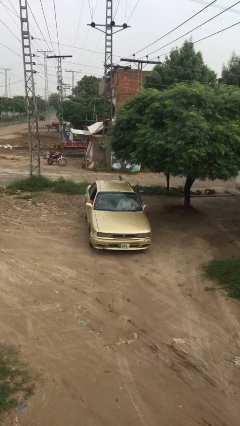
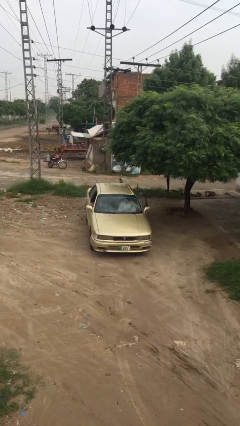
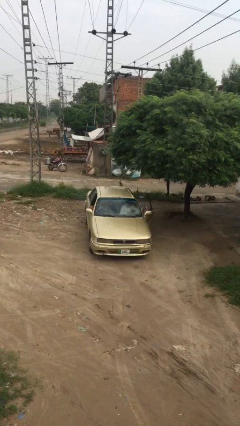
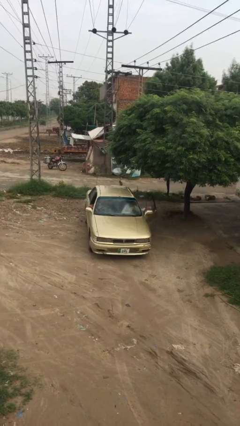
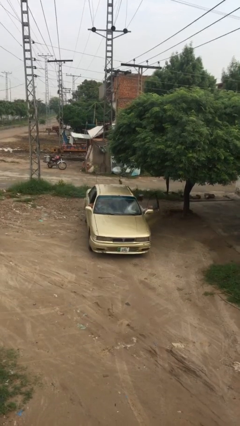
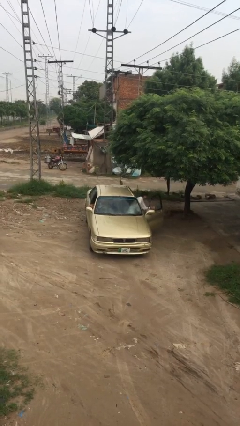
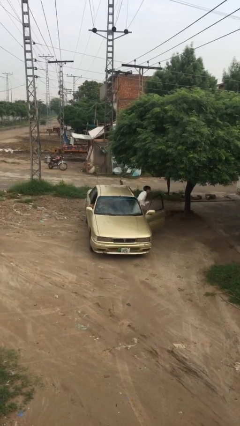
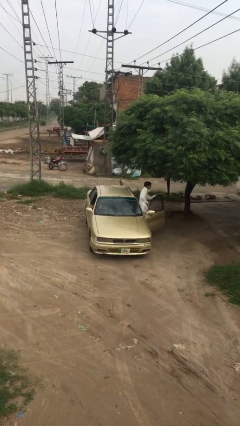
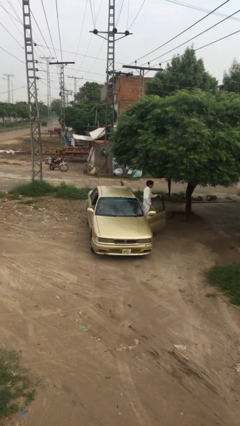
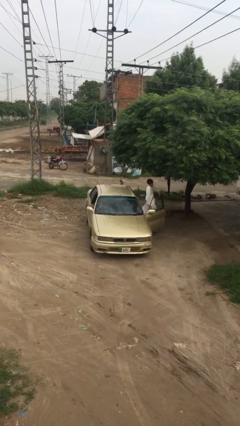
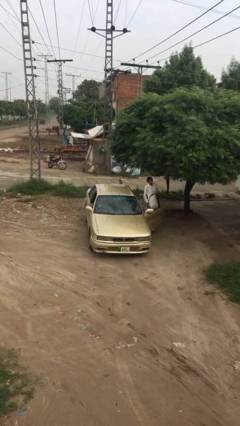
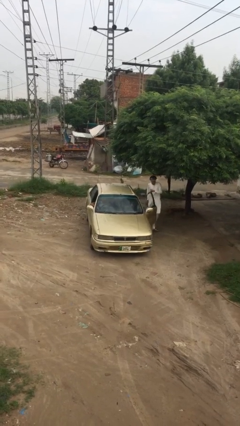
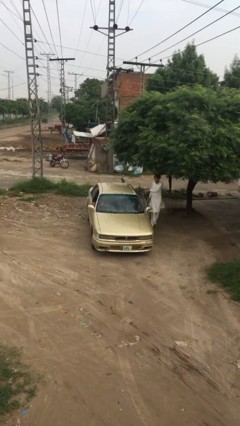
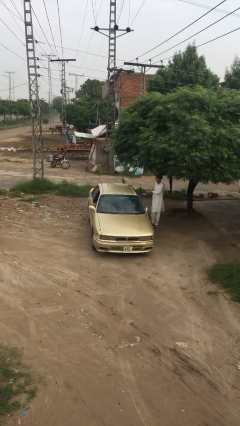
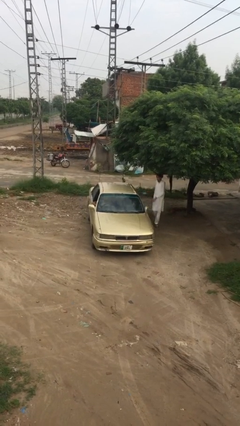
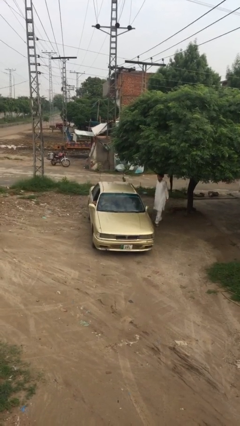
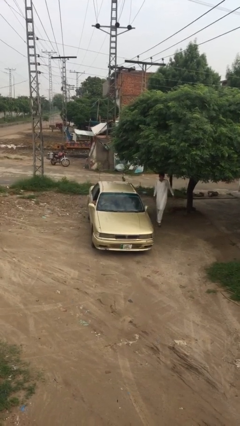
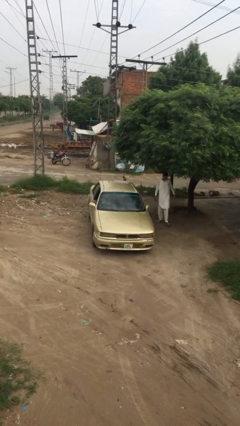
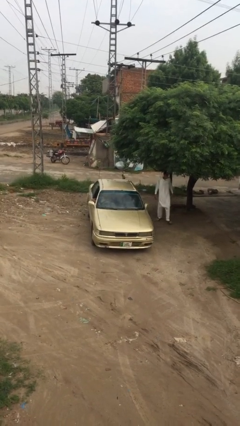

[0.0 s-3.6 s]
car drops off person

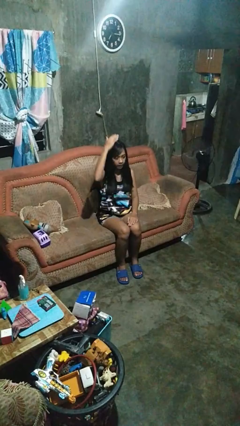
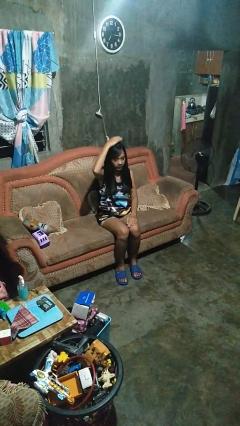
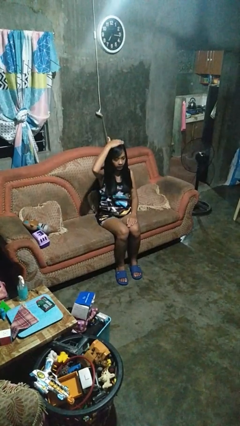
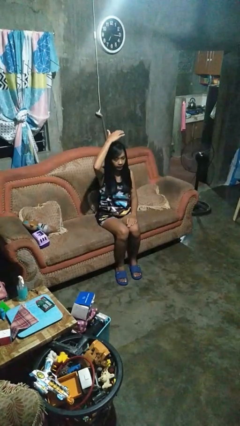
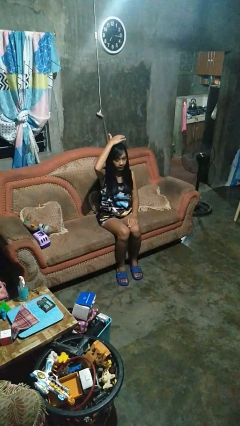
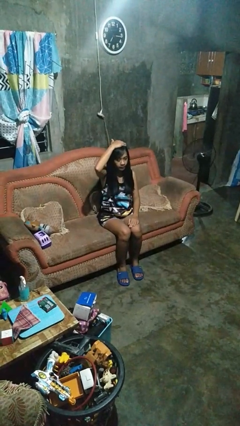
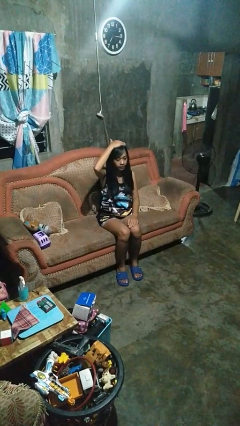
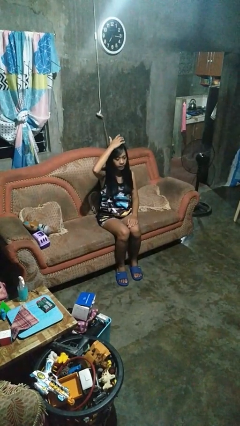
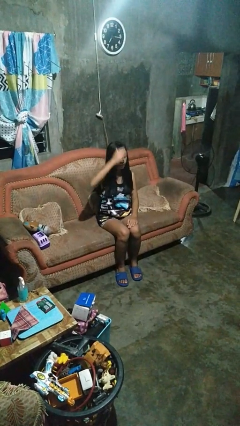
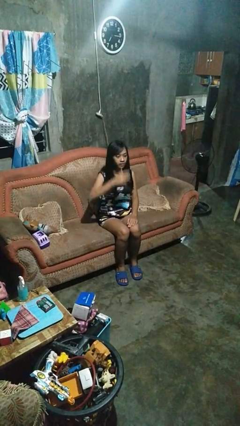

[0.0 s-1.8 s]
person pats head

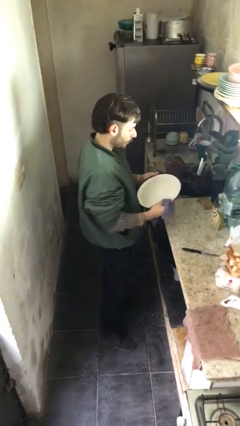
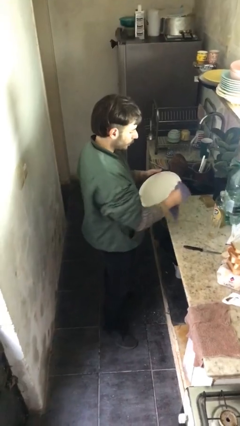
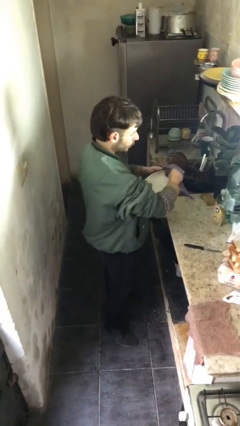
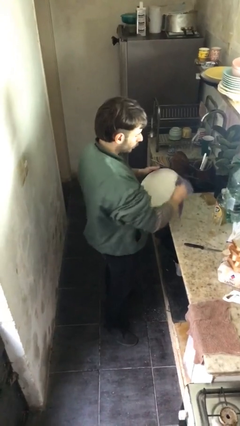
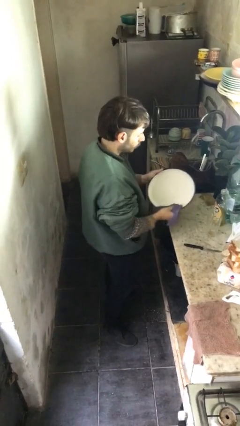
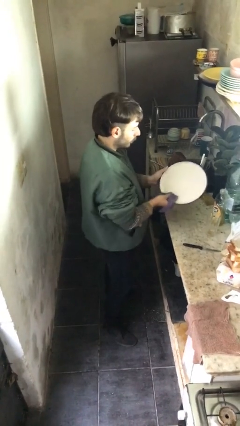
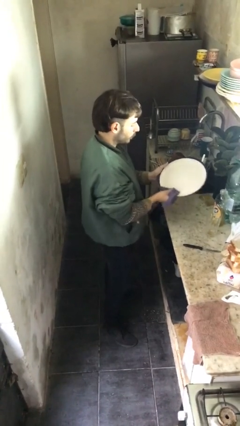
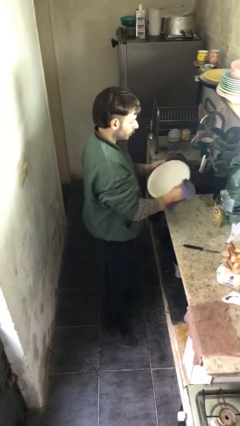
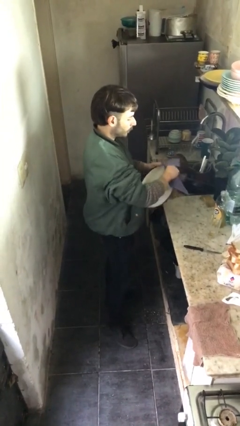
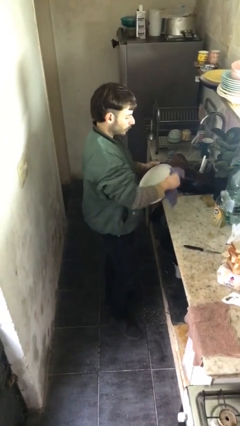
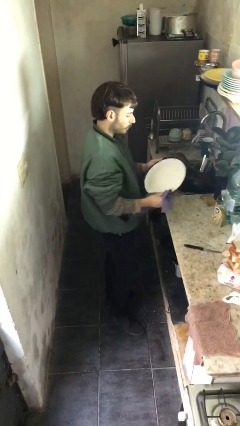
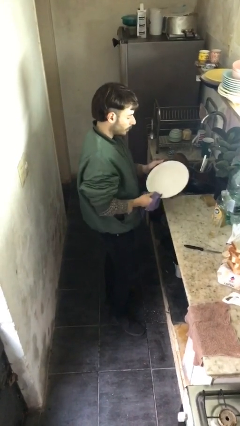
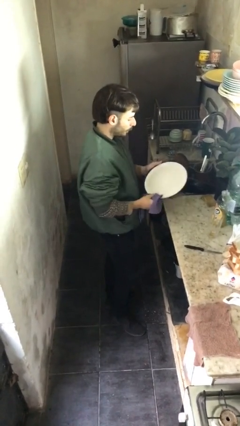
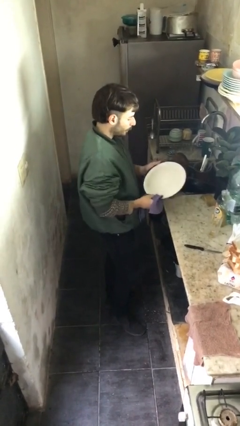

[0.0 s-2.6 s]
person dries dish

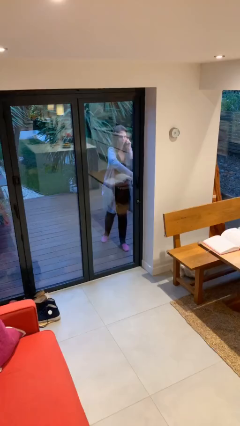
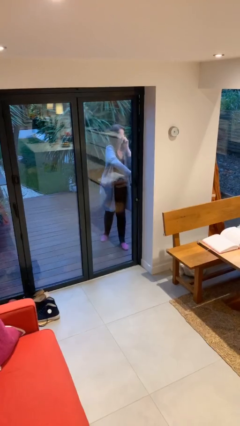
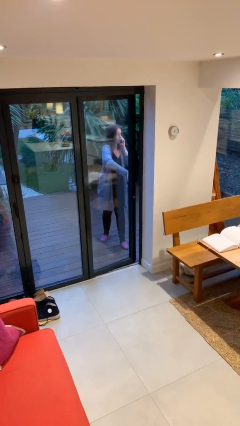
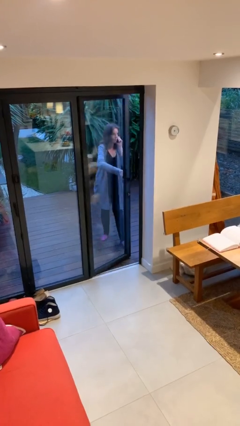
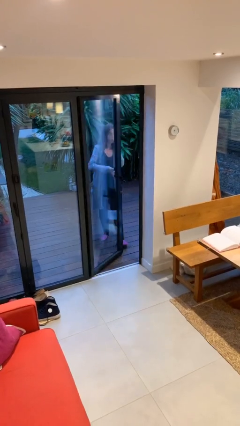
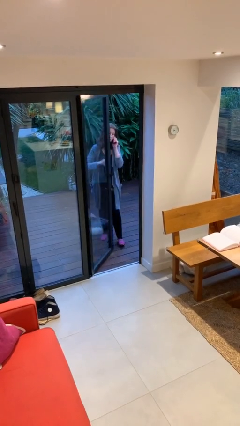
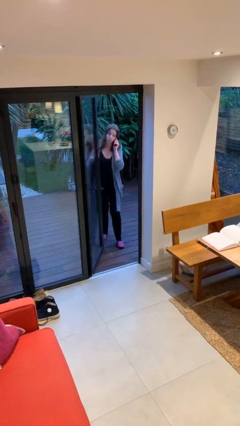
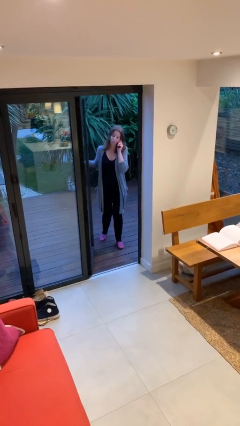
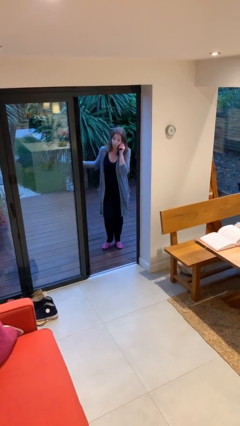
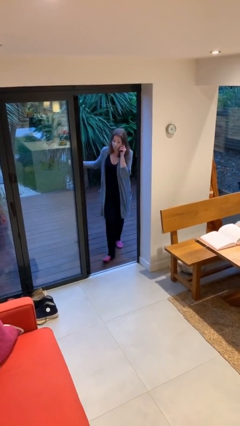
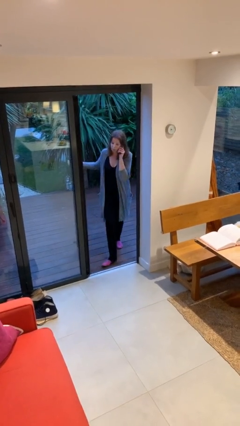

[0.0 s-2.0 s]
person opens facility door

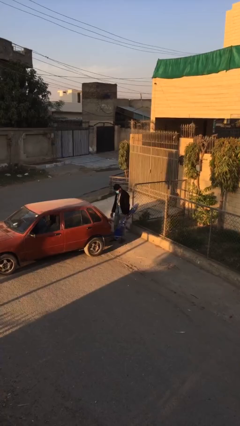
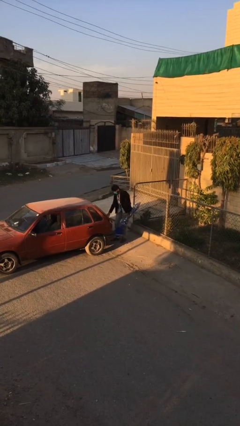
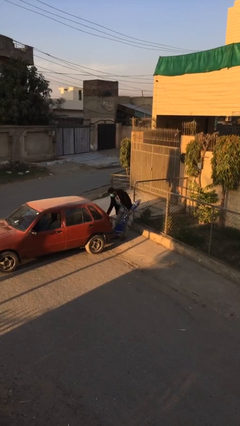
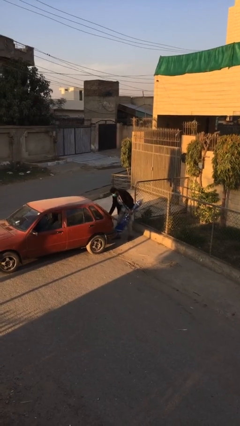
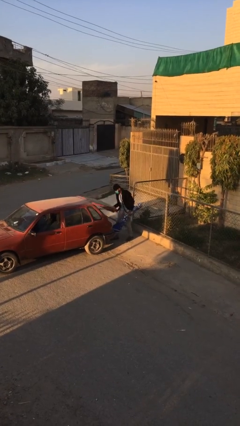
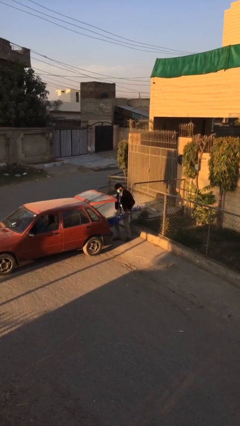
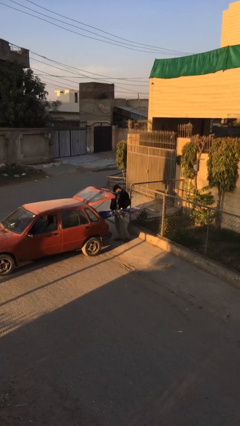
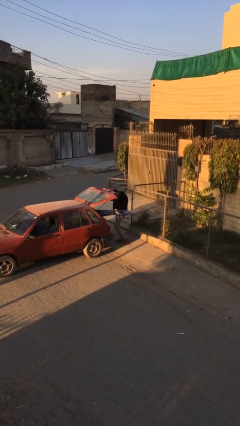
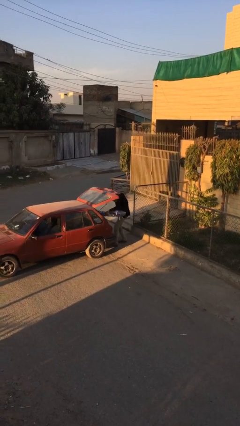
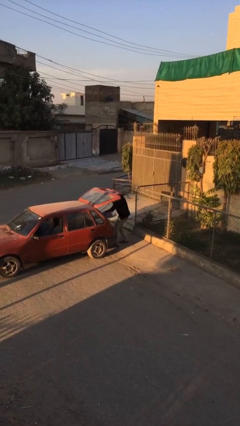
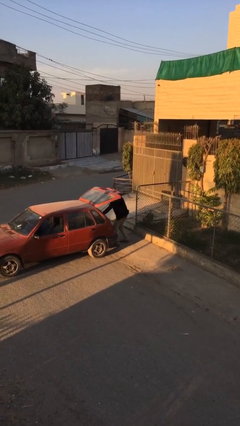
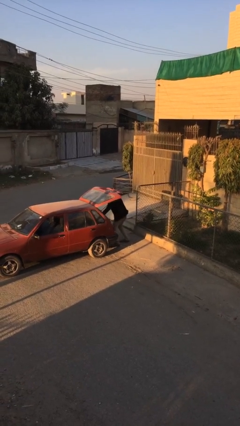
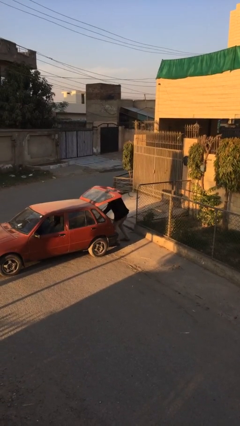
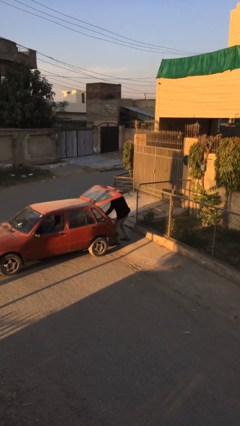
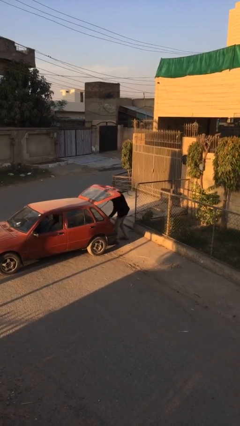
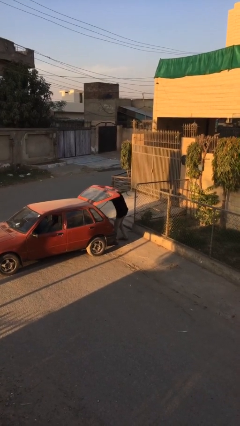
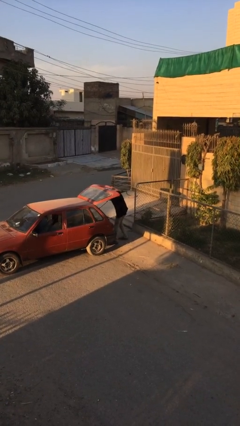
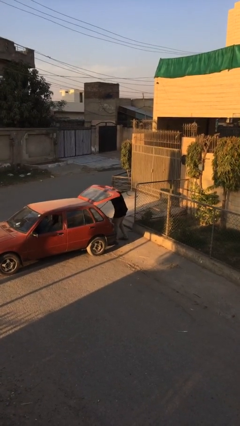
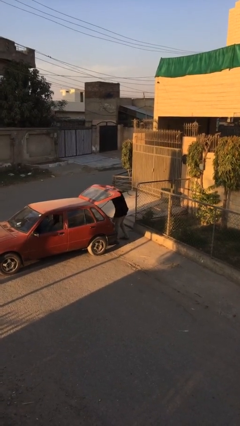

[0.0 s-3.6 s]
person loads car

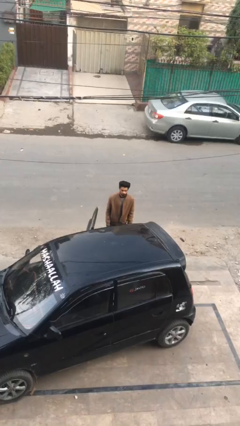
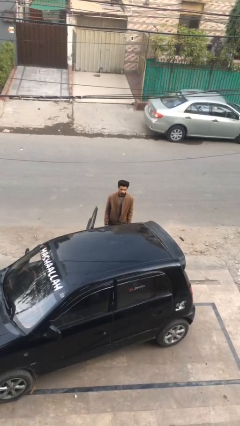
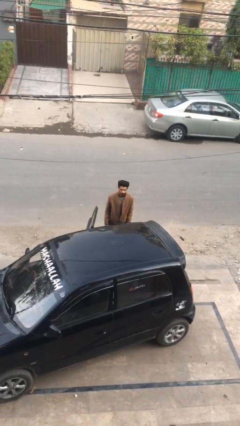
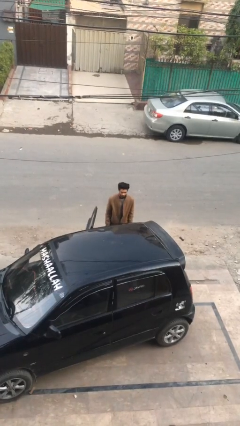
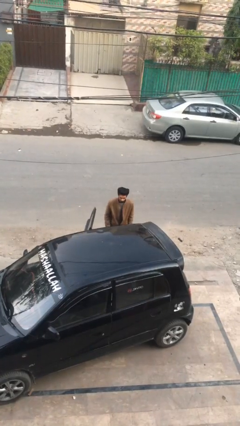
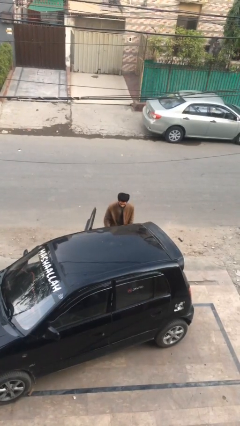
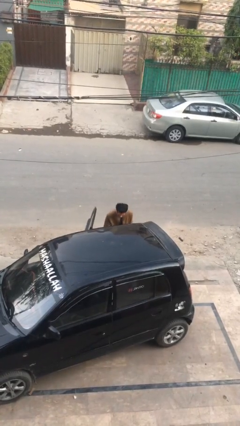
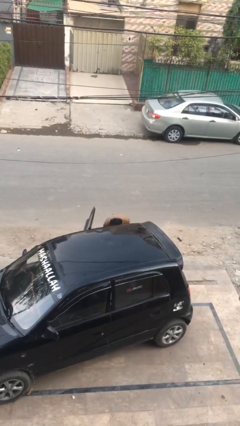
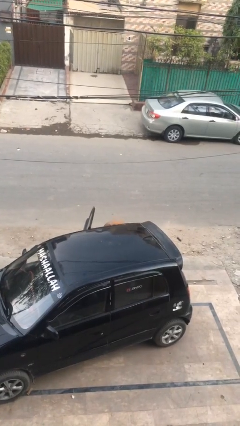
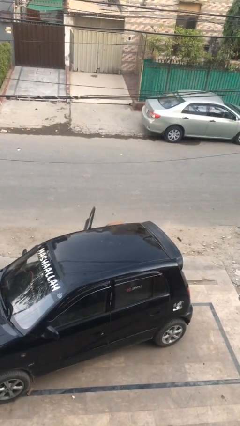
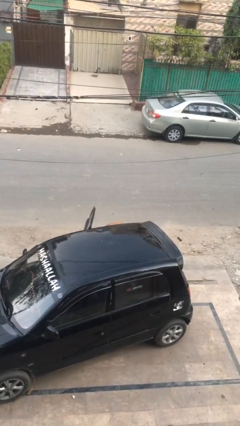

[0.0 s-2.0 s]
person unloads car

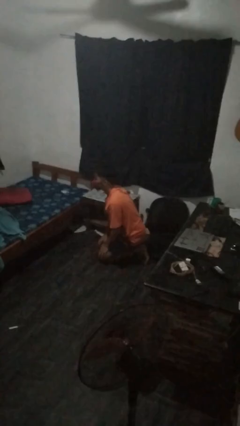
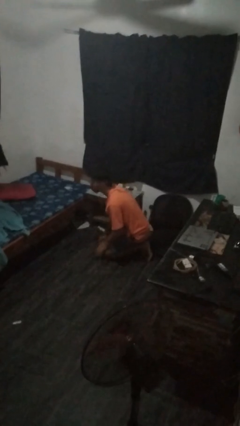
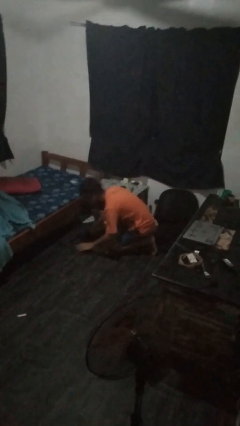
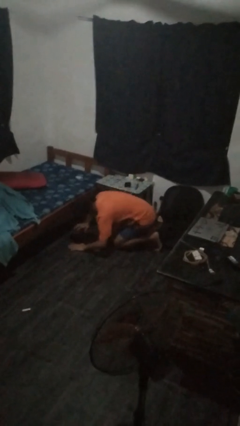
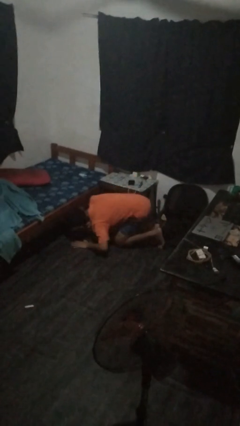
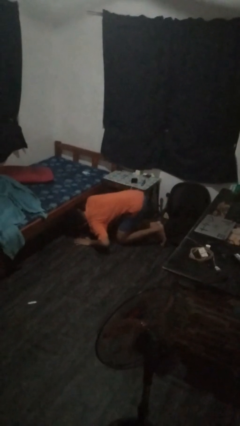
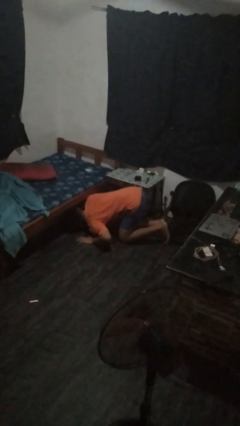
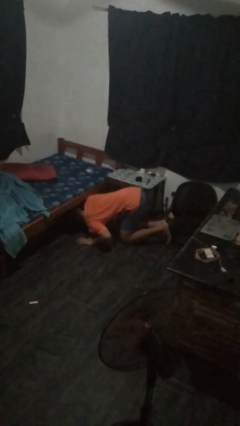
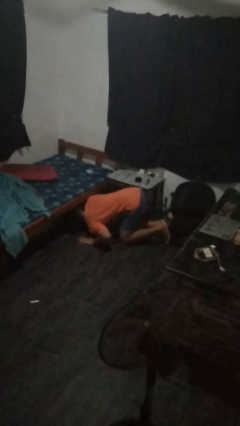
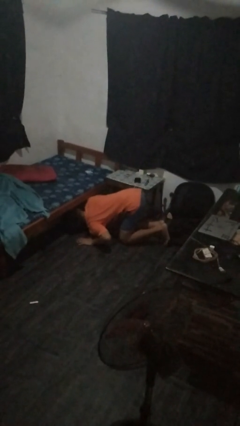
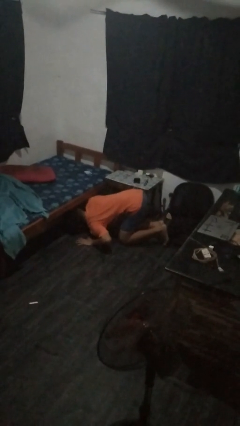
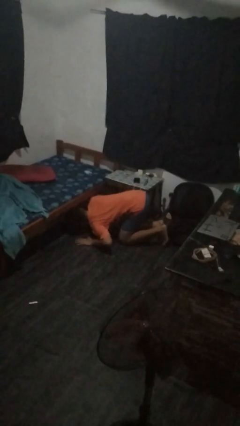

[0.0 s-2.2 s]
person searches under bed
